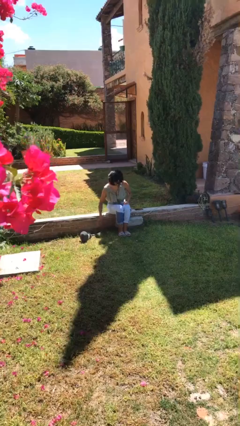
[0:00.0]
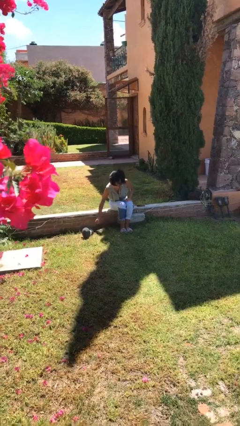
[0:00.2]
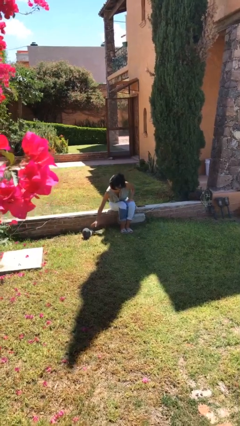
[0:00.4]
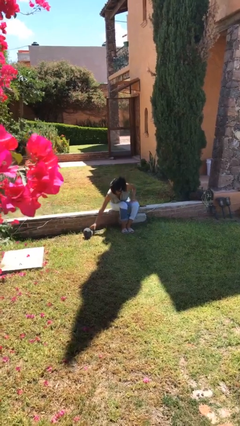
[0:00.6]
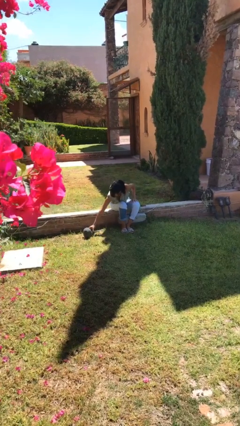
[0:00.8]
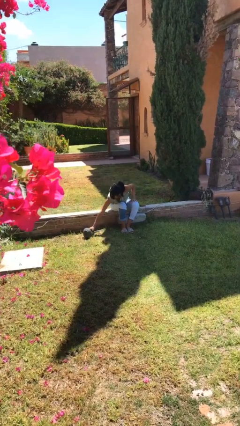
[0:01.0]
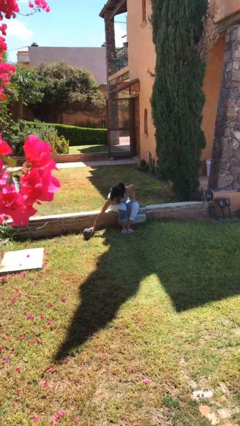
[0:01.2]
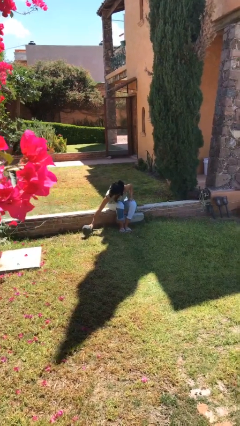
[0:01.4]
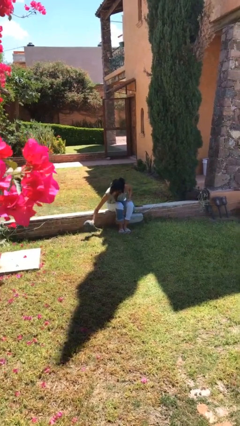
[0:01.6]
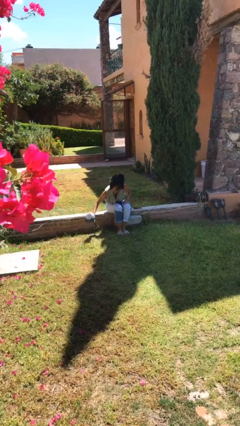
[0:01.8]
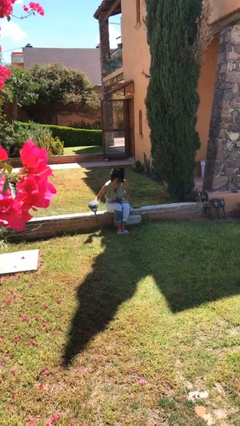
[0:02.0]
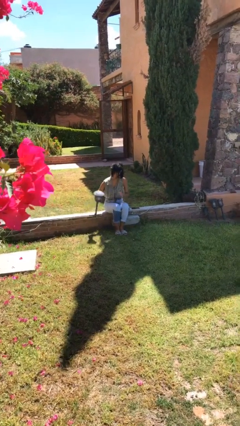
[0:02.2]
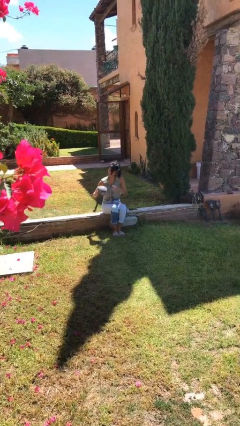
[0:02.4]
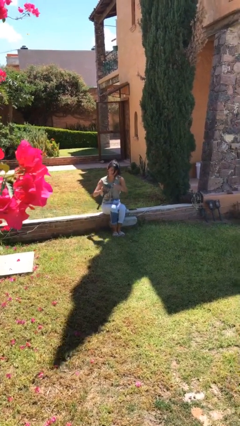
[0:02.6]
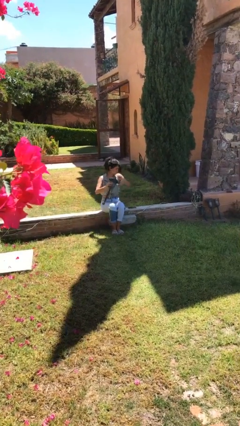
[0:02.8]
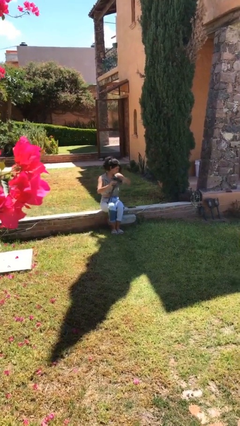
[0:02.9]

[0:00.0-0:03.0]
person picks up object from floor

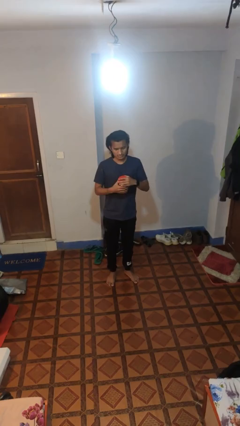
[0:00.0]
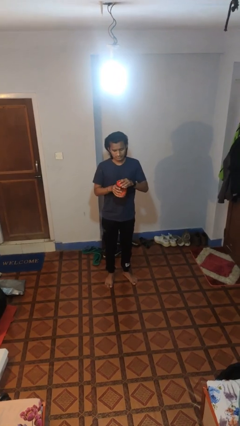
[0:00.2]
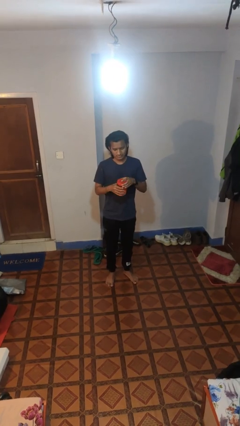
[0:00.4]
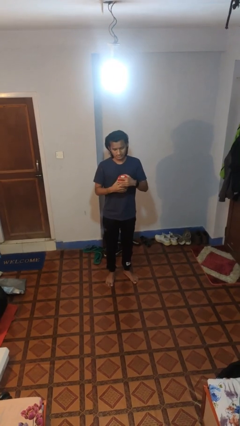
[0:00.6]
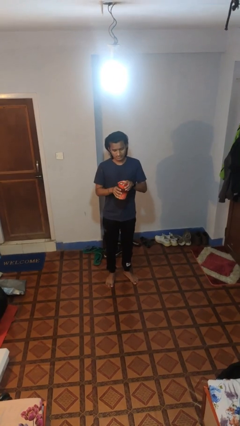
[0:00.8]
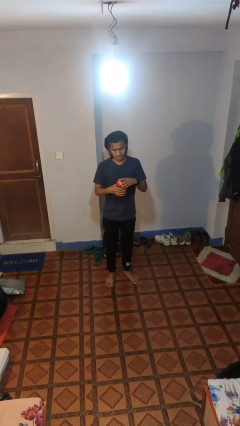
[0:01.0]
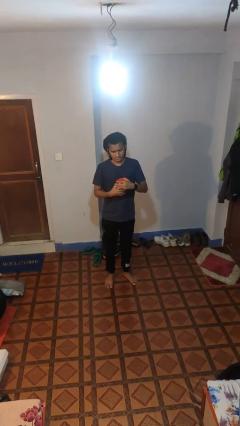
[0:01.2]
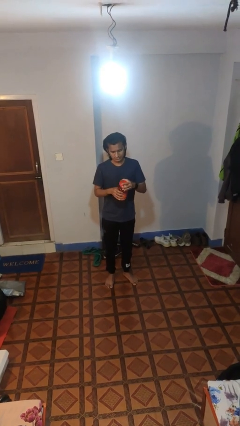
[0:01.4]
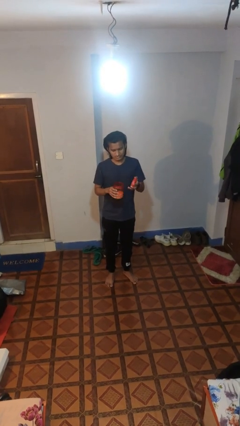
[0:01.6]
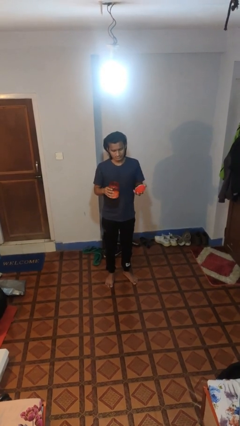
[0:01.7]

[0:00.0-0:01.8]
person opens jar

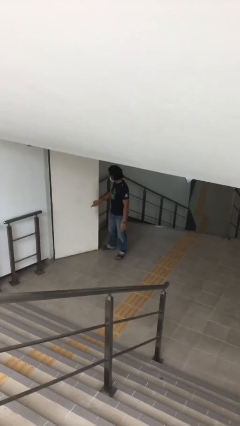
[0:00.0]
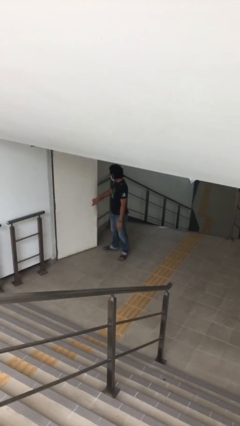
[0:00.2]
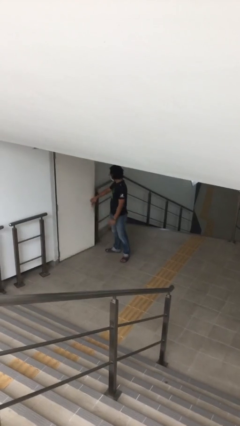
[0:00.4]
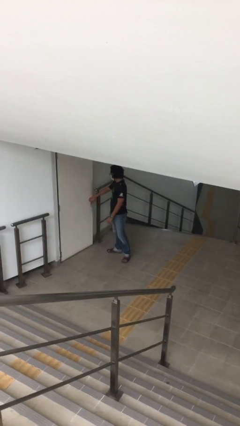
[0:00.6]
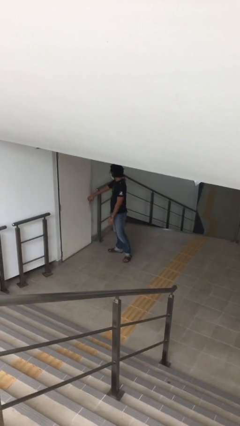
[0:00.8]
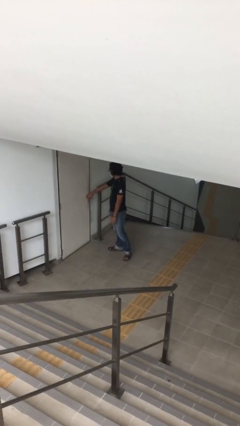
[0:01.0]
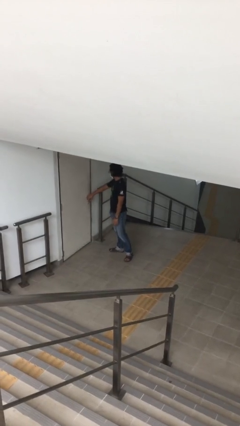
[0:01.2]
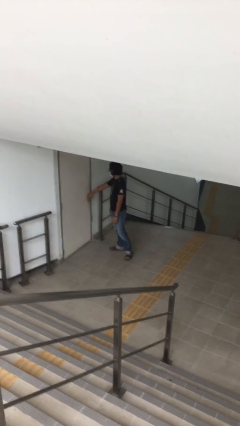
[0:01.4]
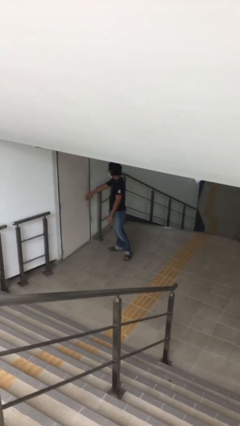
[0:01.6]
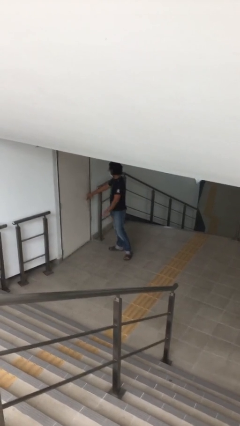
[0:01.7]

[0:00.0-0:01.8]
person closes facility door

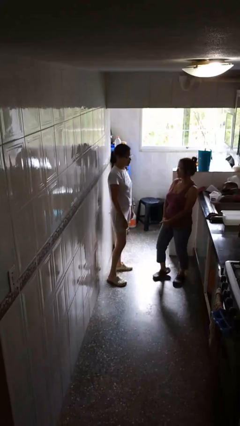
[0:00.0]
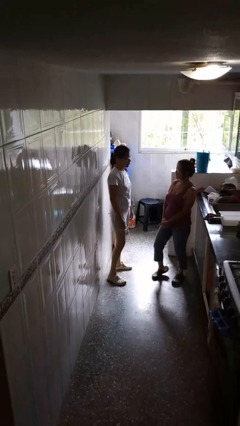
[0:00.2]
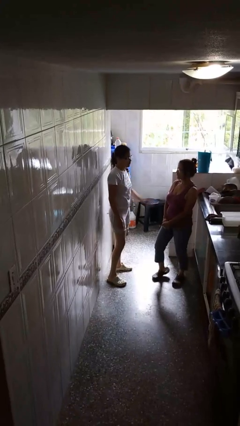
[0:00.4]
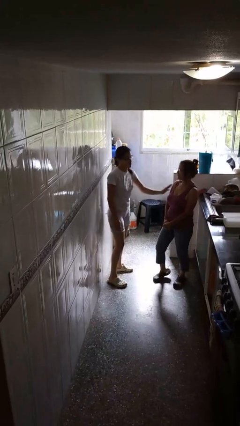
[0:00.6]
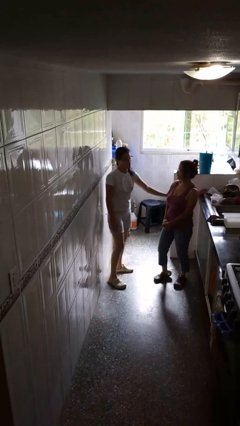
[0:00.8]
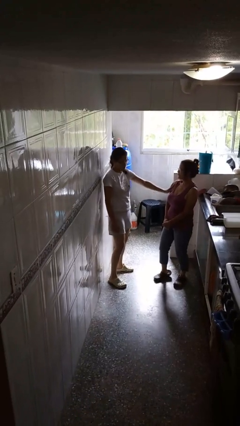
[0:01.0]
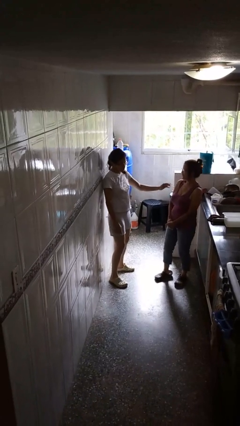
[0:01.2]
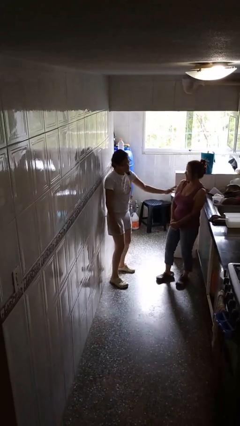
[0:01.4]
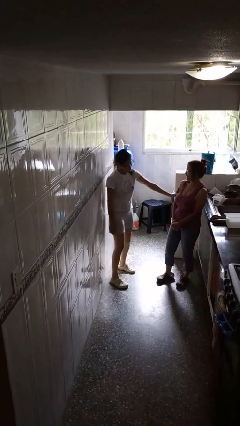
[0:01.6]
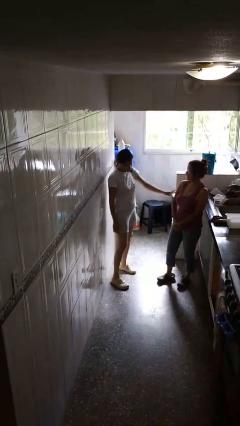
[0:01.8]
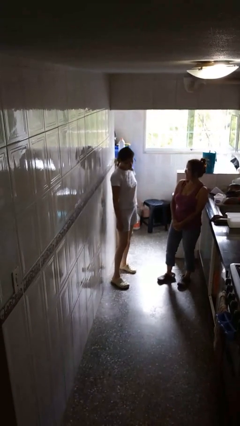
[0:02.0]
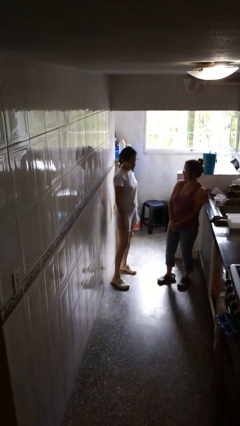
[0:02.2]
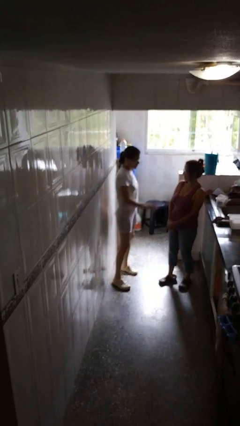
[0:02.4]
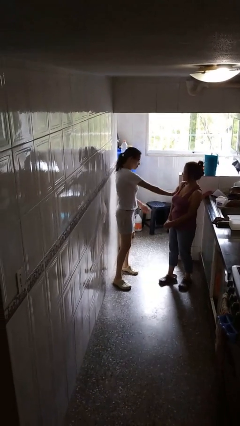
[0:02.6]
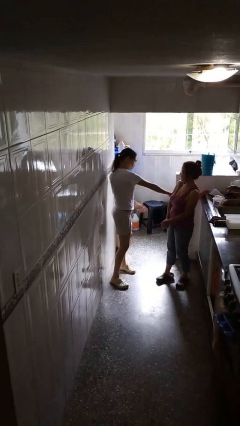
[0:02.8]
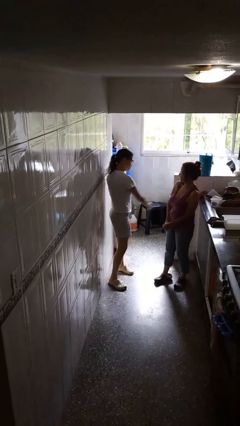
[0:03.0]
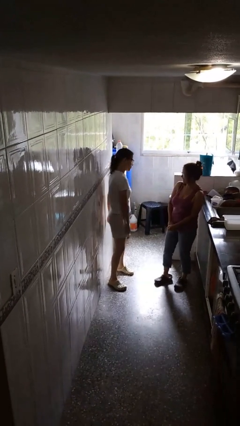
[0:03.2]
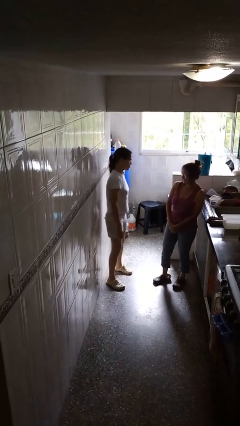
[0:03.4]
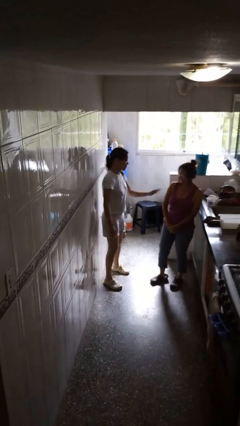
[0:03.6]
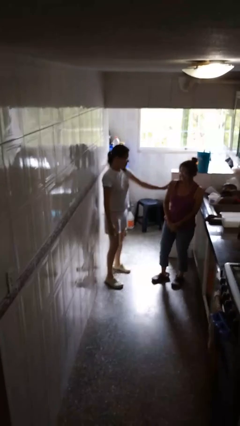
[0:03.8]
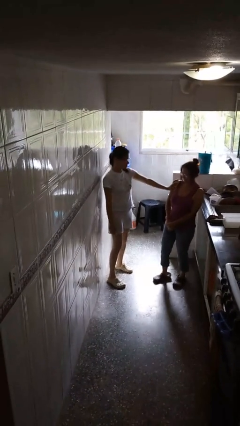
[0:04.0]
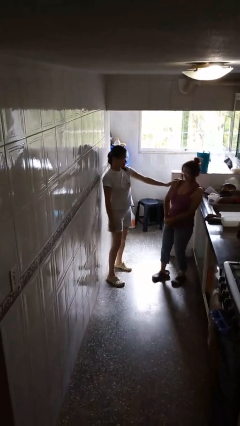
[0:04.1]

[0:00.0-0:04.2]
person shoves person

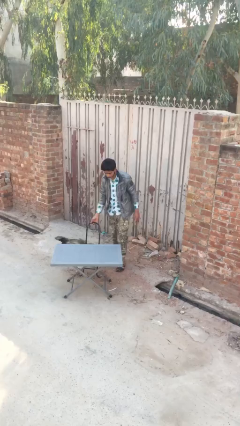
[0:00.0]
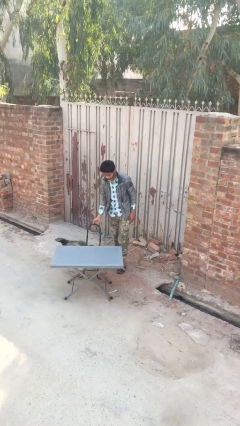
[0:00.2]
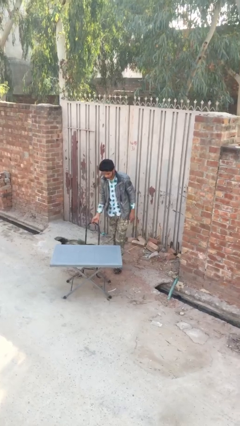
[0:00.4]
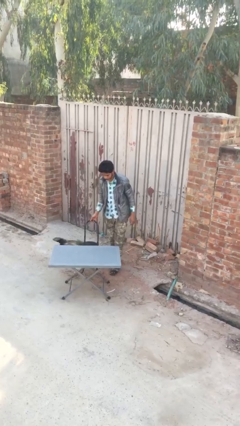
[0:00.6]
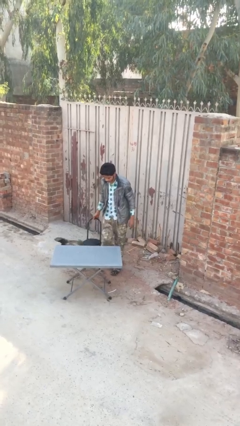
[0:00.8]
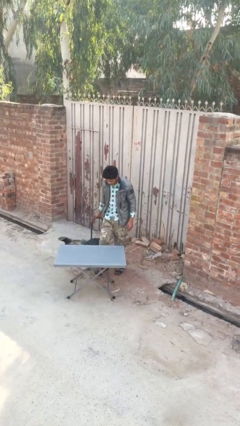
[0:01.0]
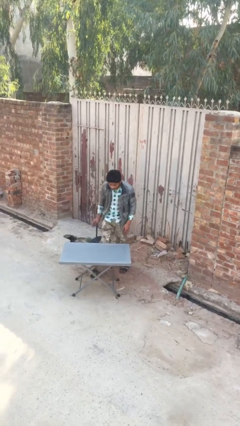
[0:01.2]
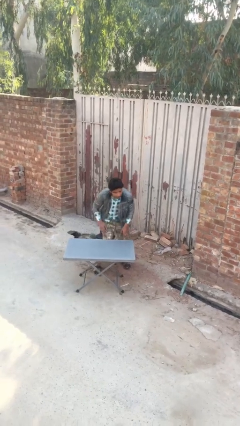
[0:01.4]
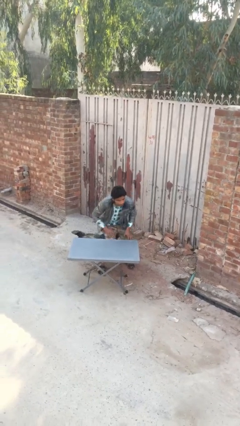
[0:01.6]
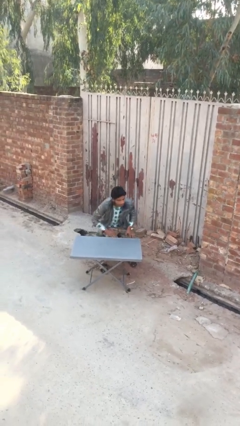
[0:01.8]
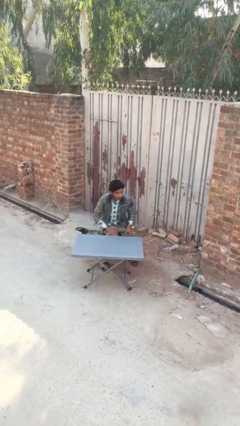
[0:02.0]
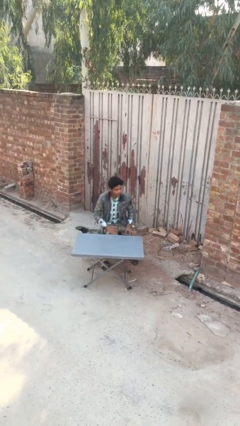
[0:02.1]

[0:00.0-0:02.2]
person sits down

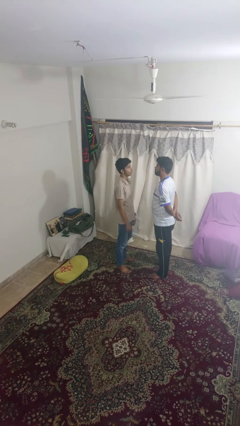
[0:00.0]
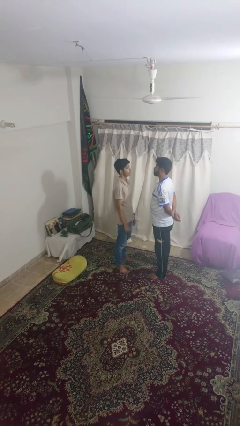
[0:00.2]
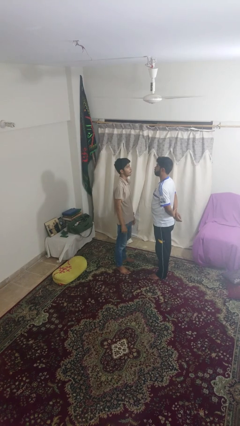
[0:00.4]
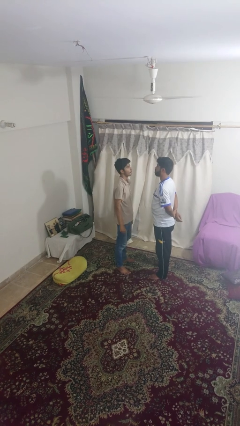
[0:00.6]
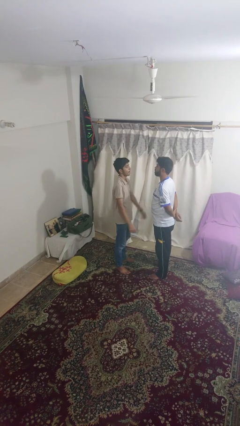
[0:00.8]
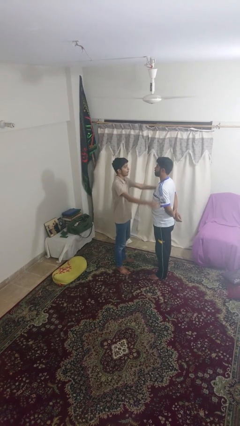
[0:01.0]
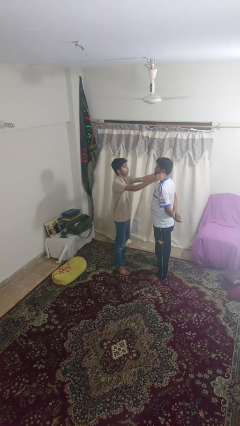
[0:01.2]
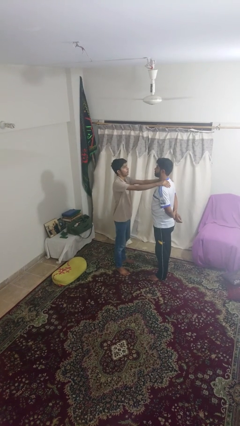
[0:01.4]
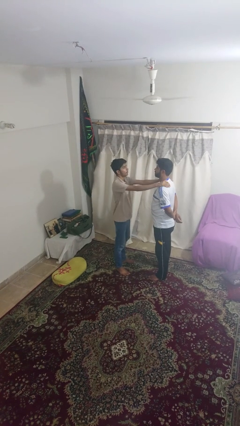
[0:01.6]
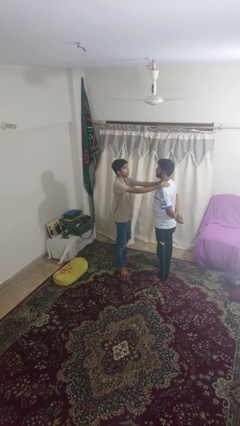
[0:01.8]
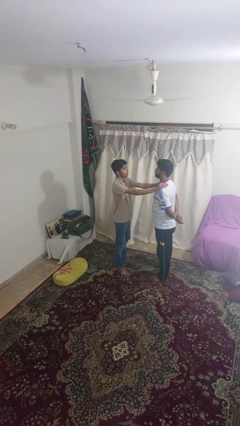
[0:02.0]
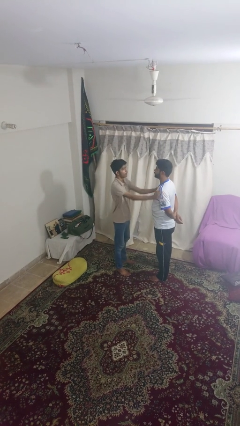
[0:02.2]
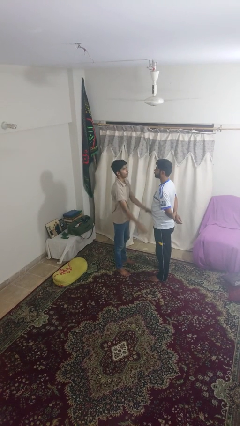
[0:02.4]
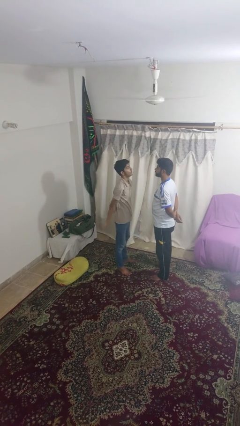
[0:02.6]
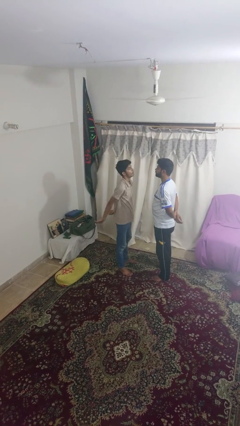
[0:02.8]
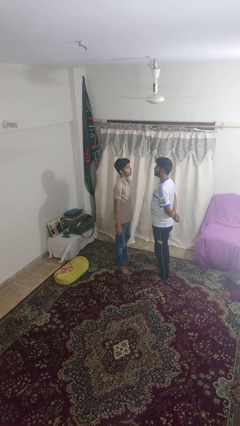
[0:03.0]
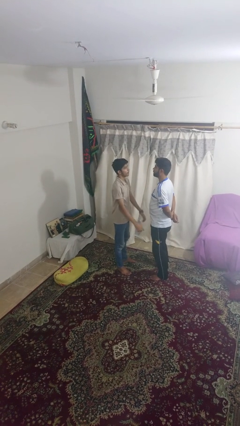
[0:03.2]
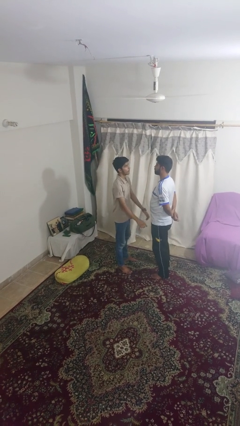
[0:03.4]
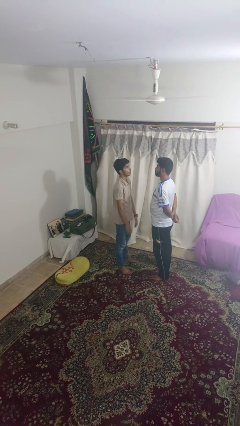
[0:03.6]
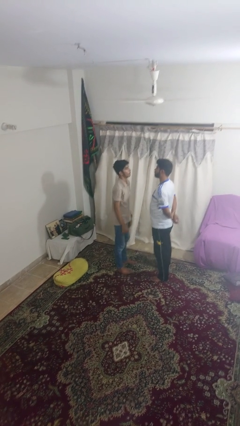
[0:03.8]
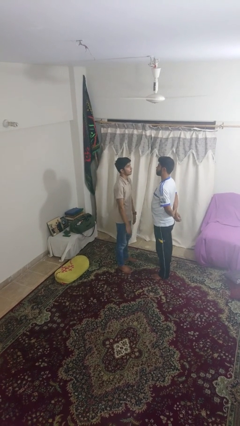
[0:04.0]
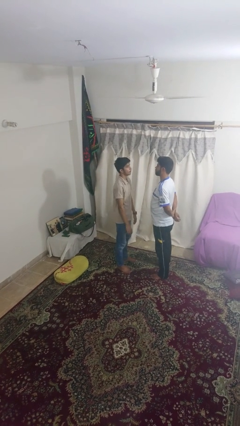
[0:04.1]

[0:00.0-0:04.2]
person pounds shoulders of person
